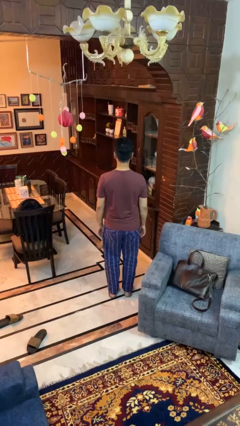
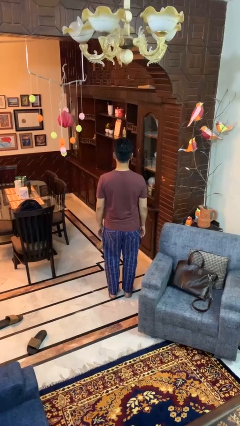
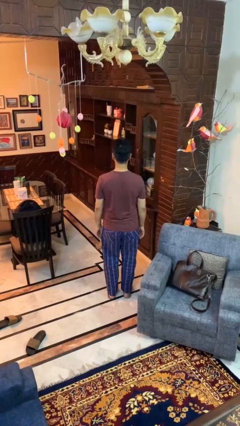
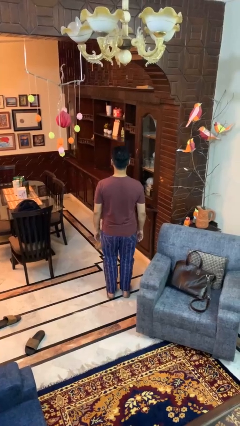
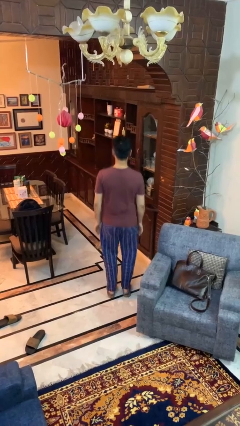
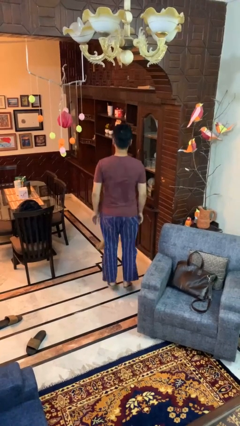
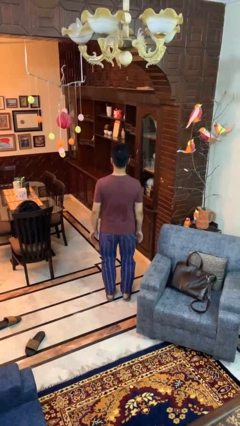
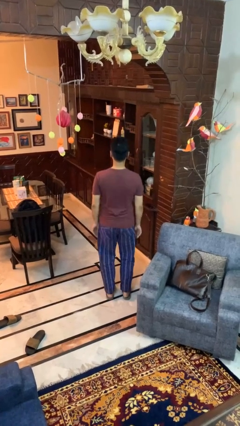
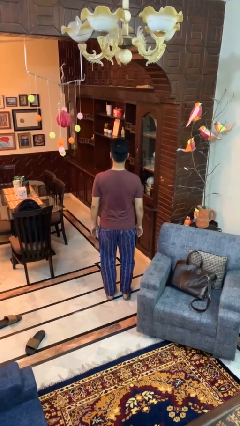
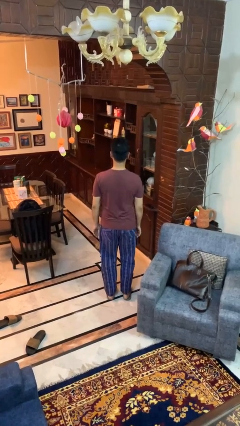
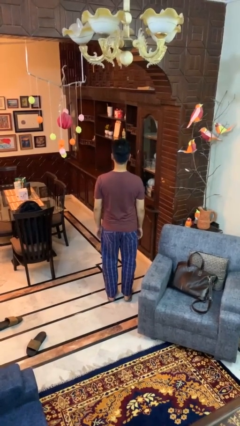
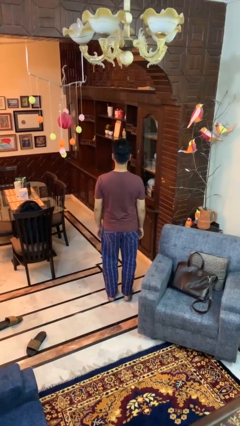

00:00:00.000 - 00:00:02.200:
person jumps

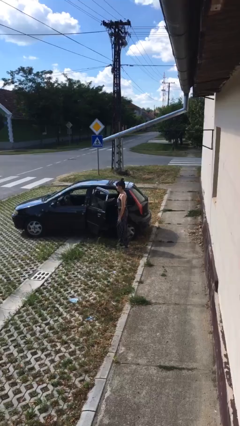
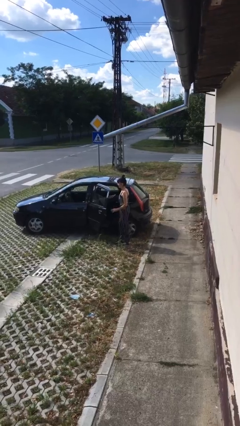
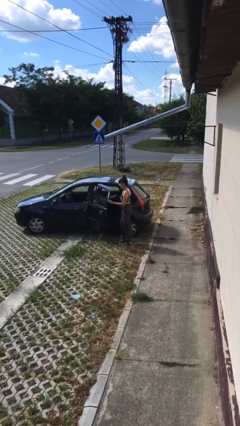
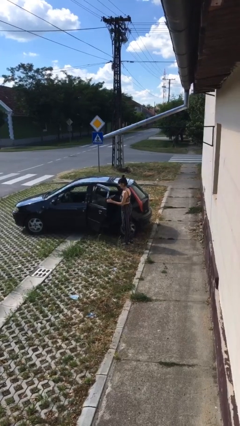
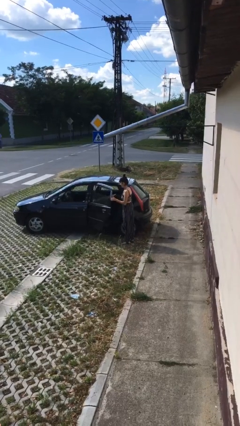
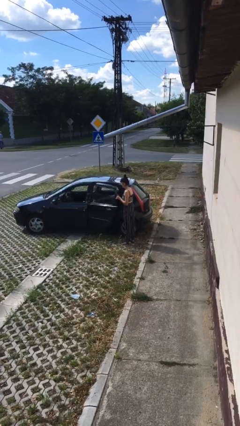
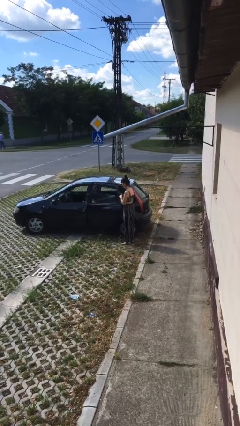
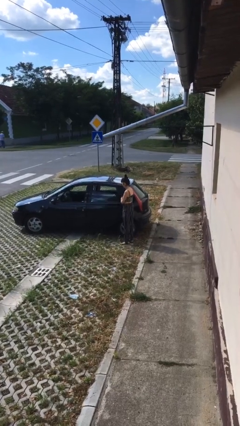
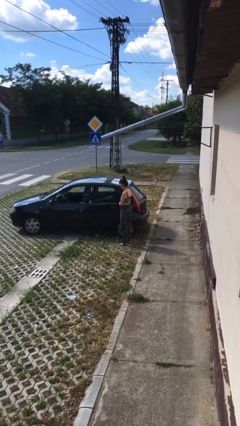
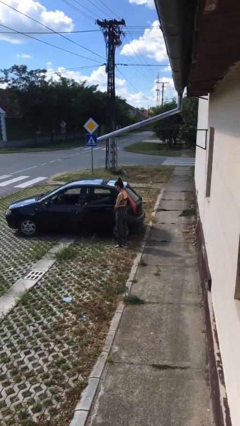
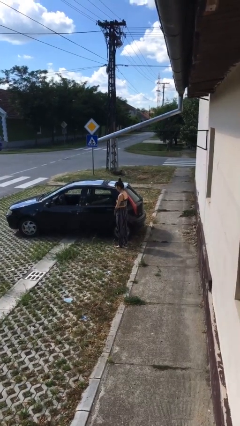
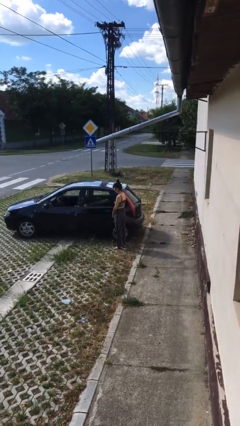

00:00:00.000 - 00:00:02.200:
person closes car door

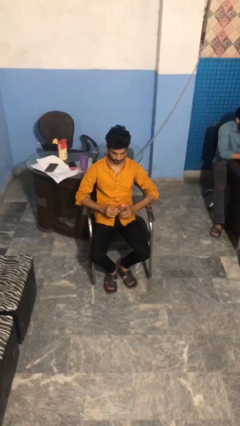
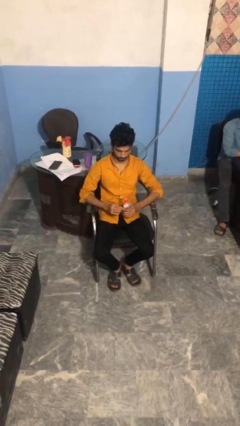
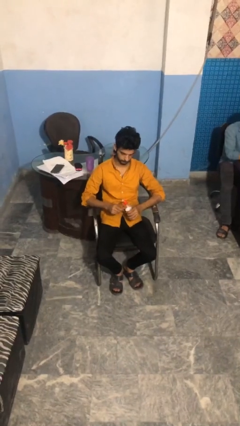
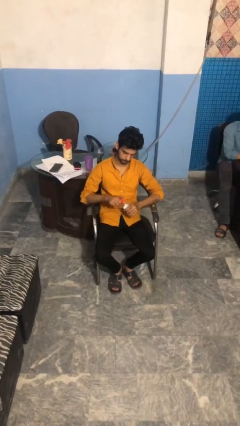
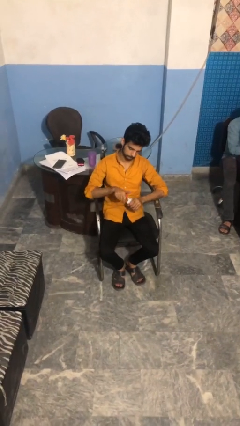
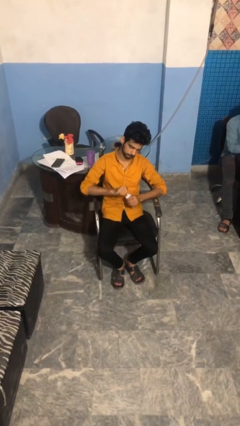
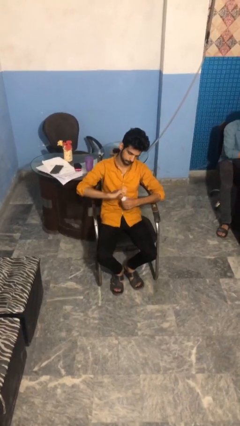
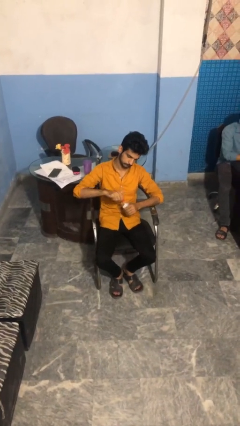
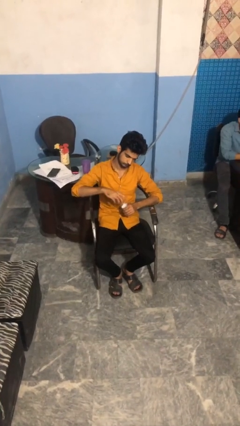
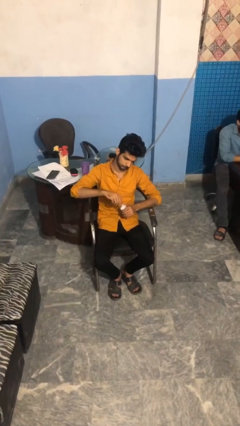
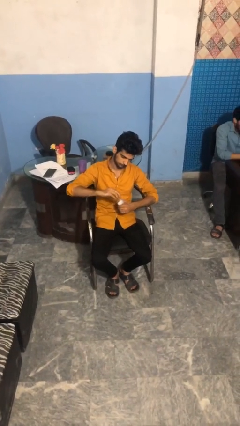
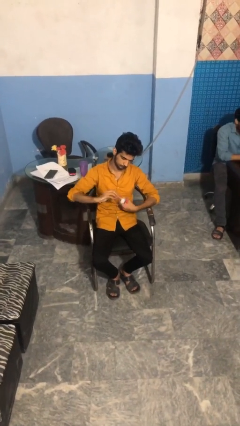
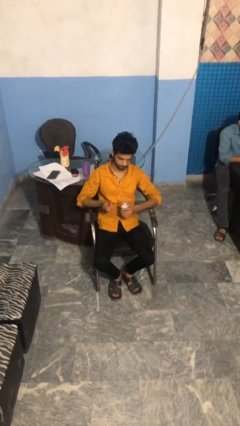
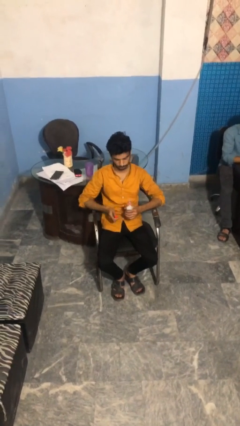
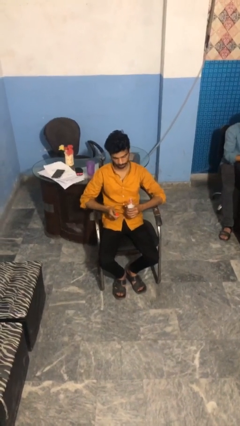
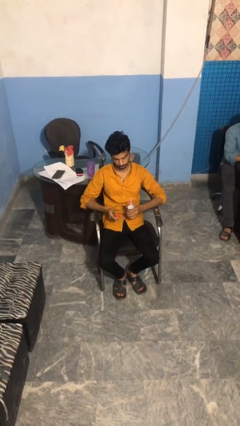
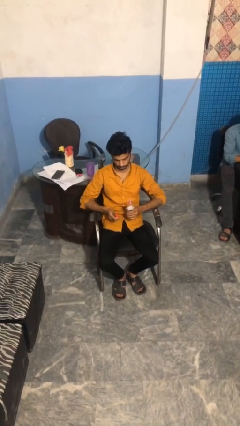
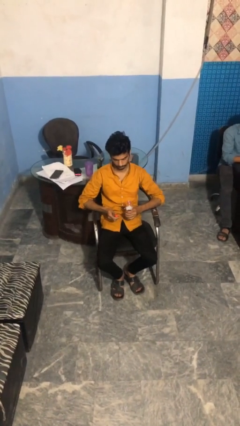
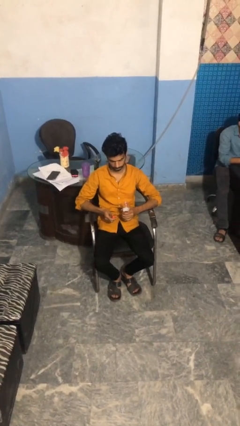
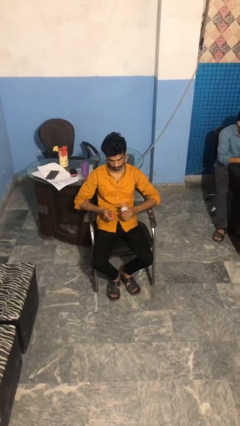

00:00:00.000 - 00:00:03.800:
person unscrews lid from bottle

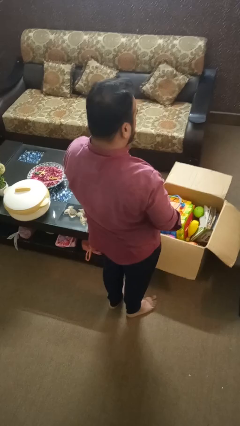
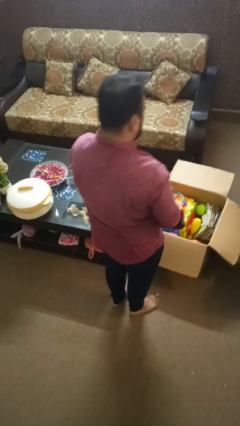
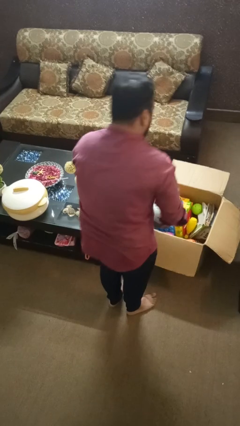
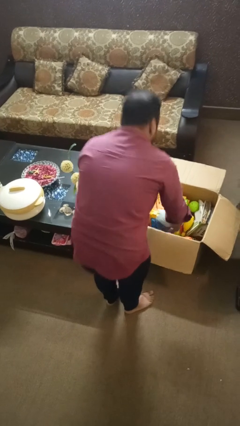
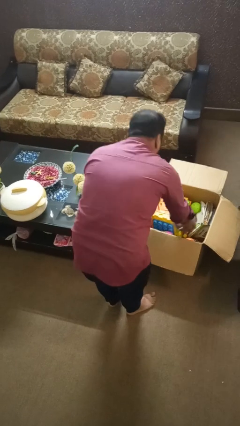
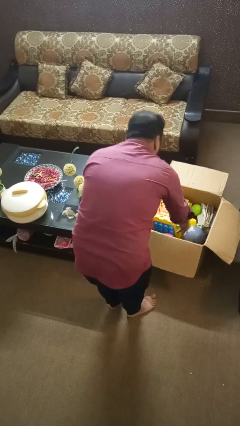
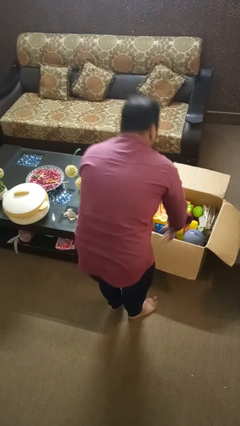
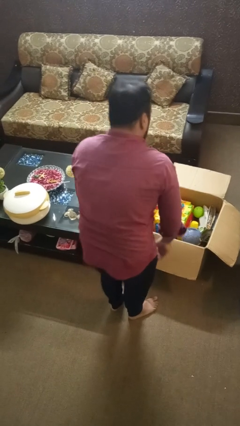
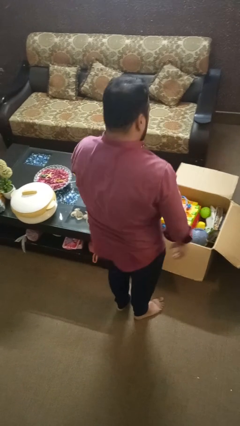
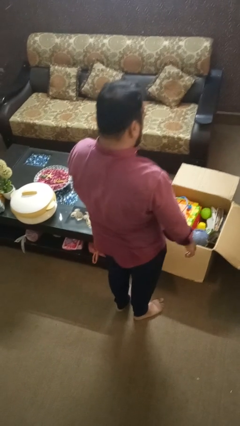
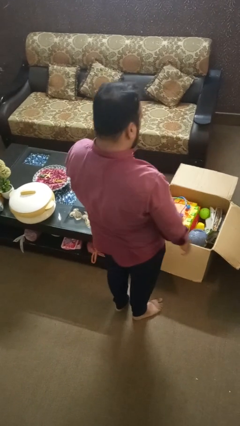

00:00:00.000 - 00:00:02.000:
person puts object into box

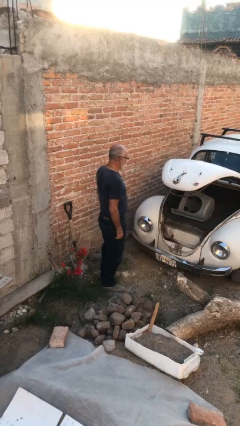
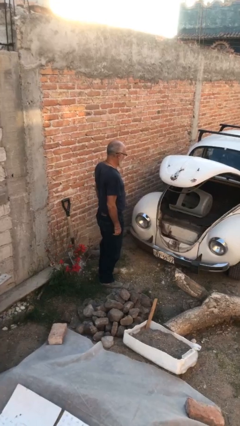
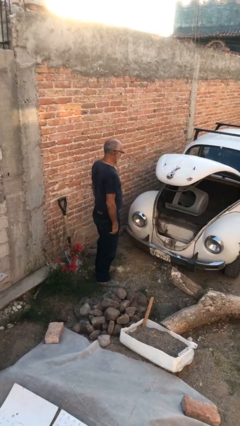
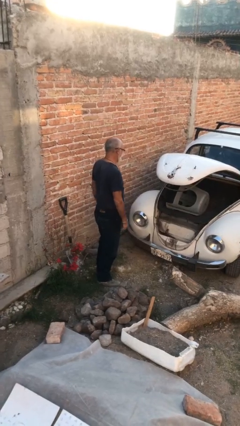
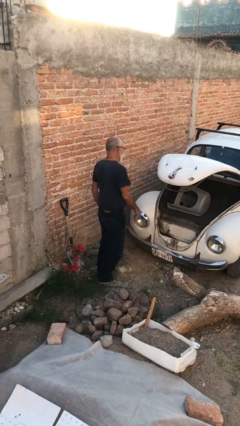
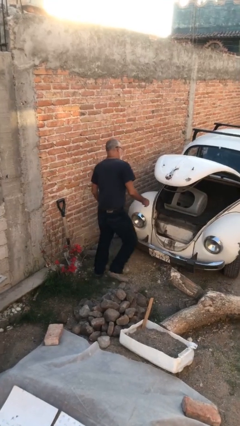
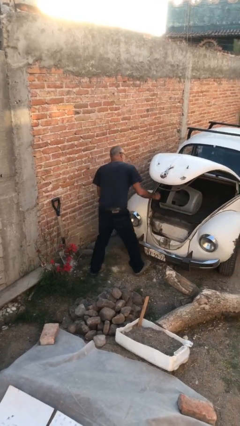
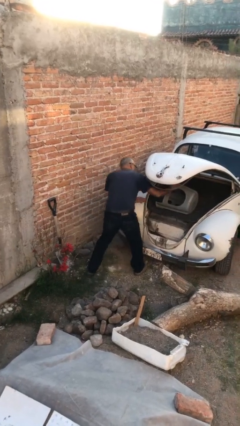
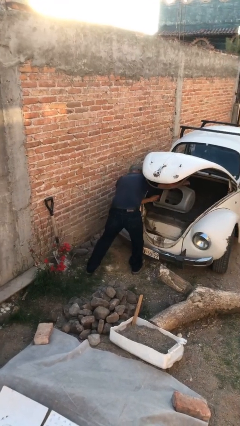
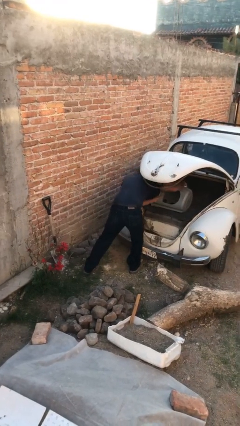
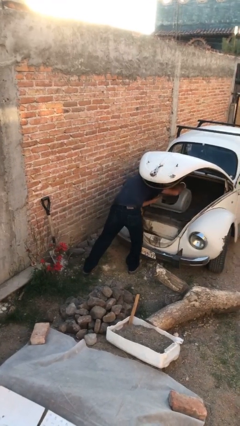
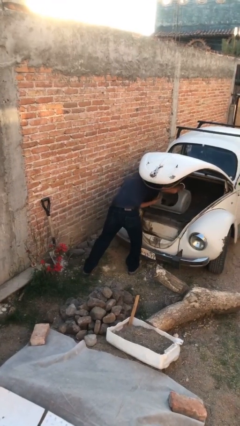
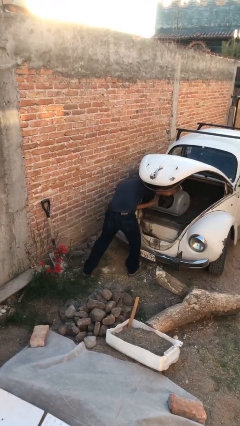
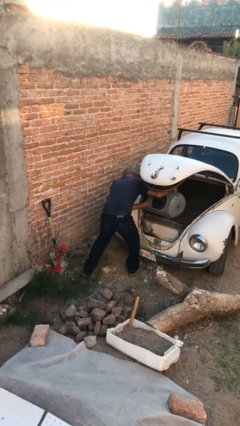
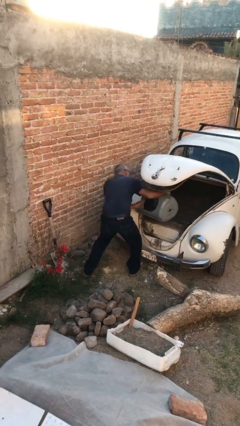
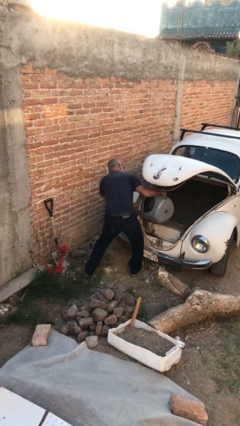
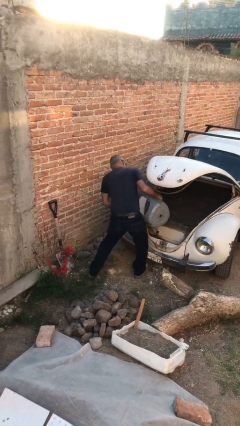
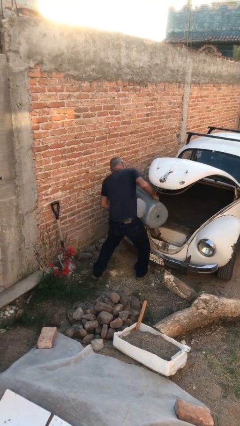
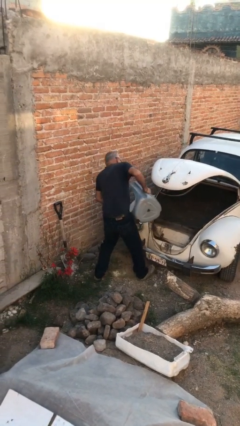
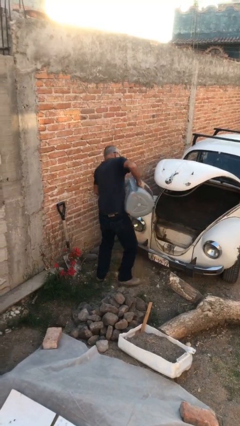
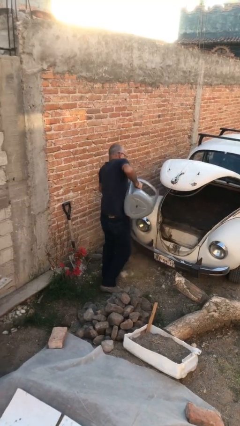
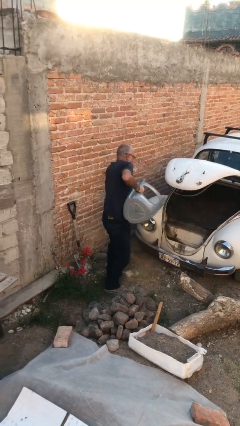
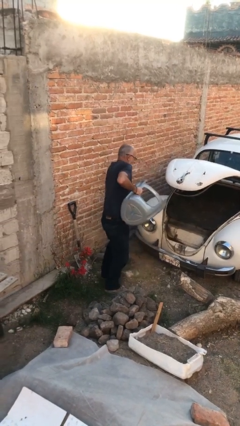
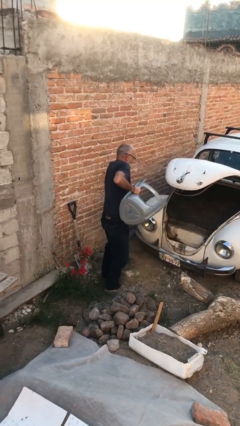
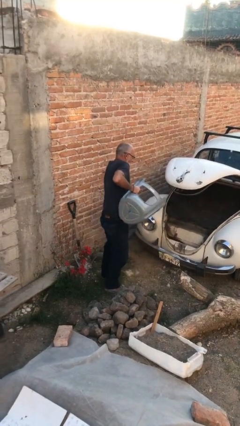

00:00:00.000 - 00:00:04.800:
person unloads car

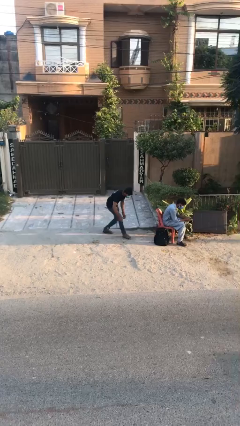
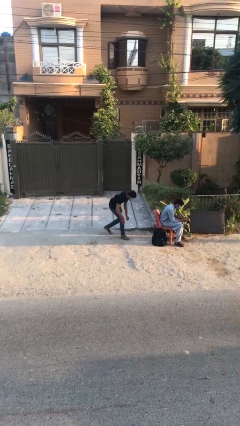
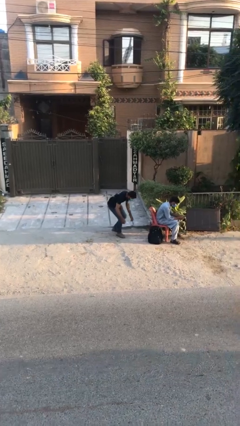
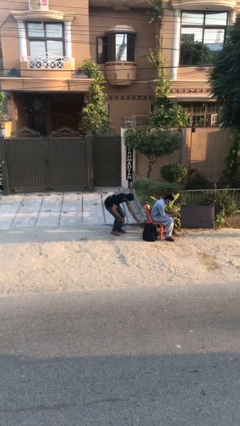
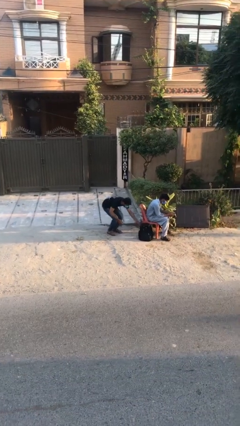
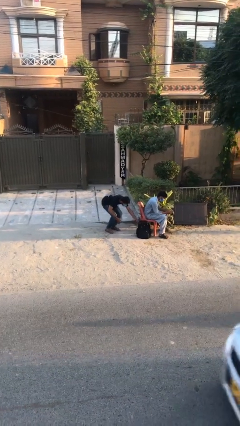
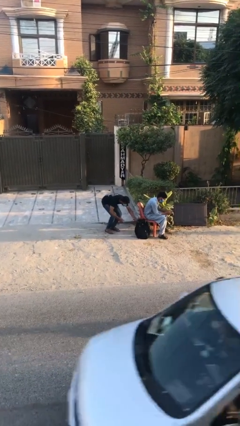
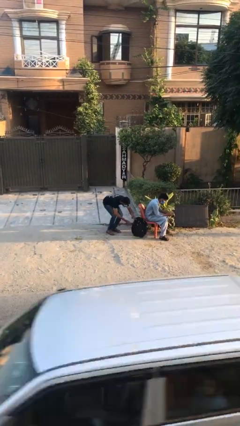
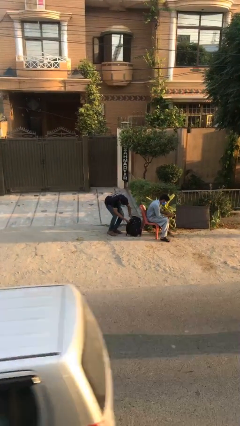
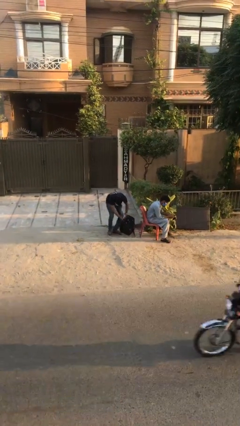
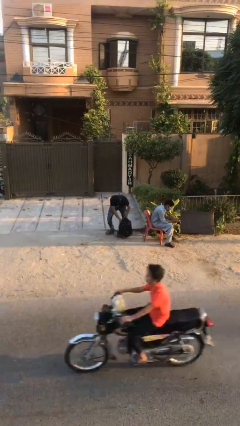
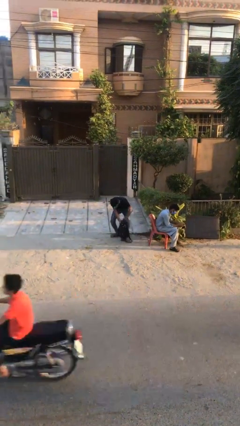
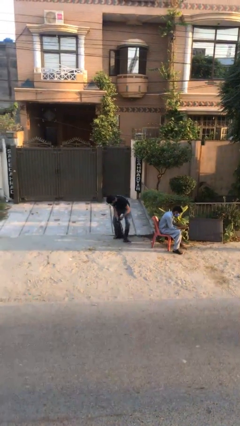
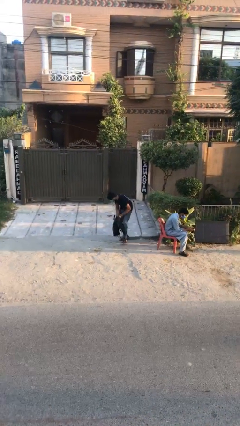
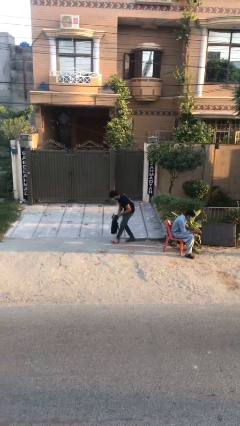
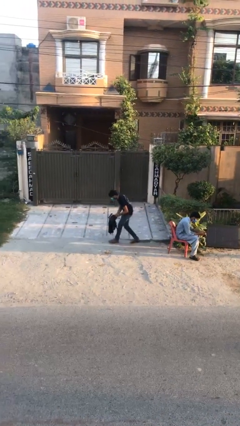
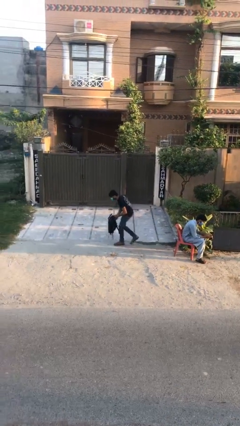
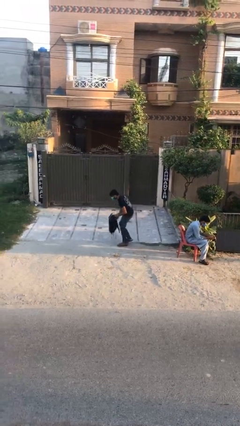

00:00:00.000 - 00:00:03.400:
person steals object from person
